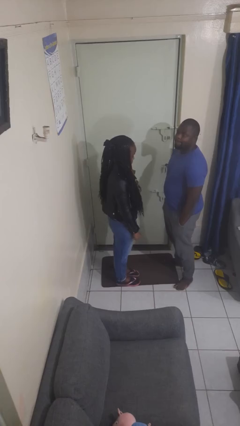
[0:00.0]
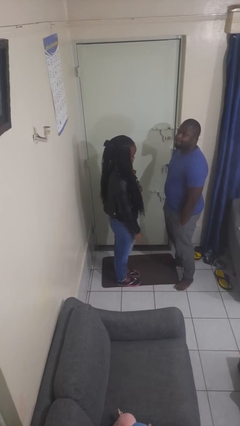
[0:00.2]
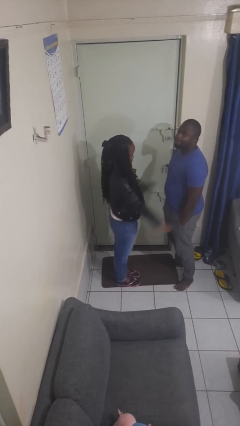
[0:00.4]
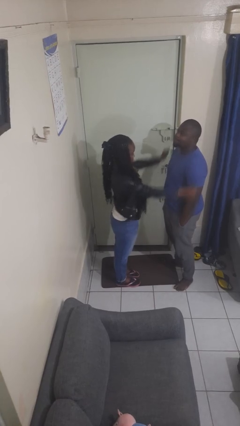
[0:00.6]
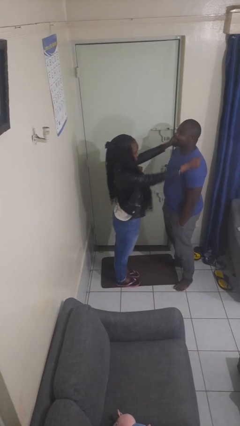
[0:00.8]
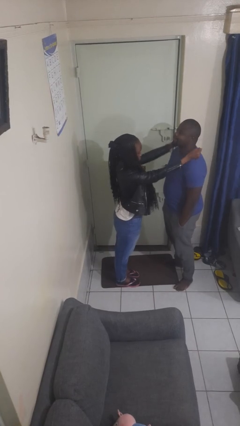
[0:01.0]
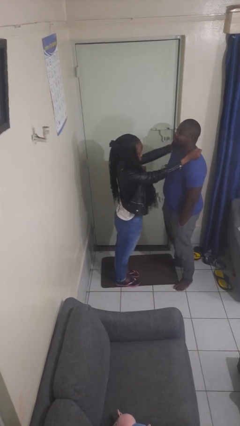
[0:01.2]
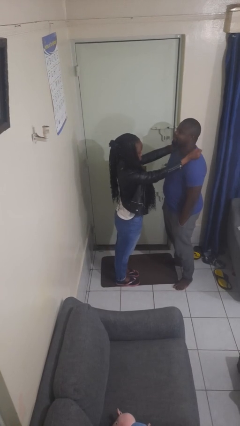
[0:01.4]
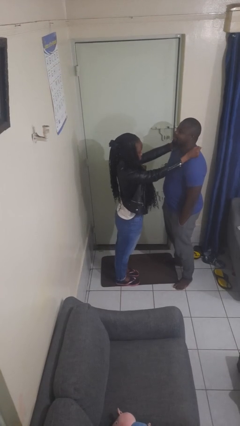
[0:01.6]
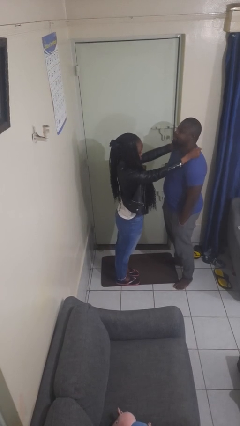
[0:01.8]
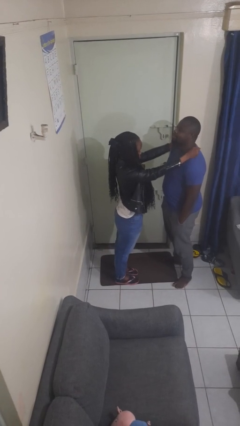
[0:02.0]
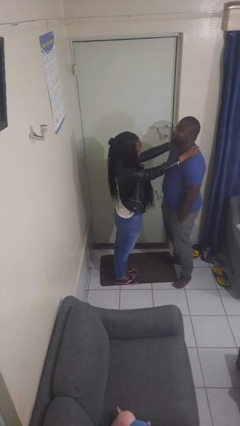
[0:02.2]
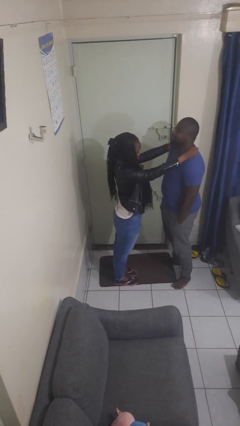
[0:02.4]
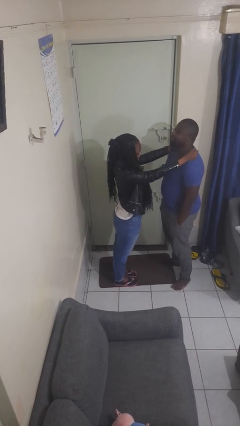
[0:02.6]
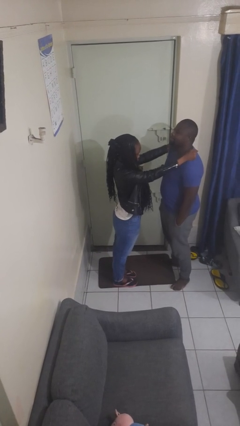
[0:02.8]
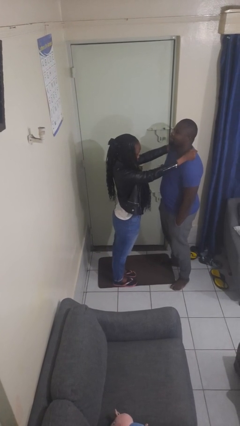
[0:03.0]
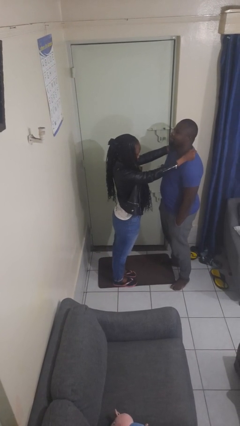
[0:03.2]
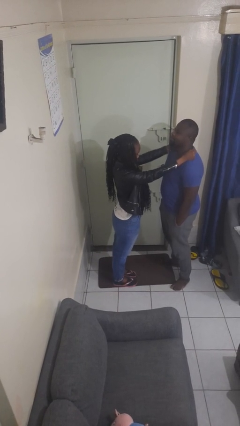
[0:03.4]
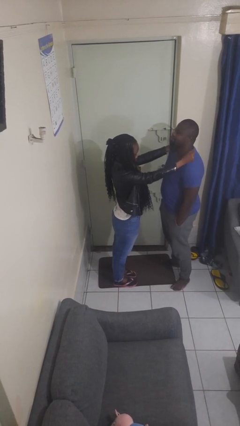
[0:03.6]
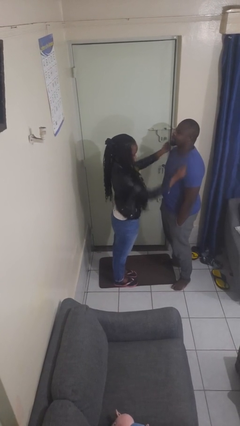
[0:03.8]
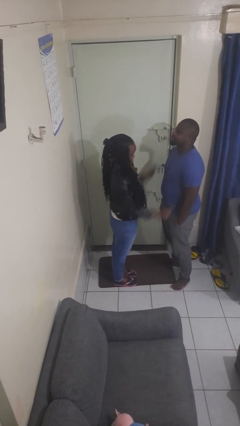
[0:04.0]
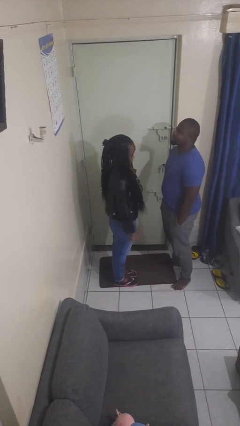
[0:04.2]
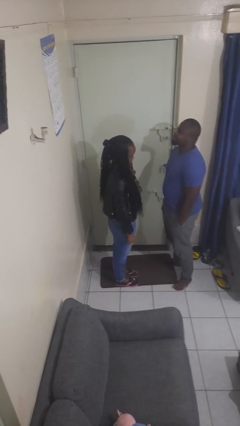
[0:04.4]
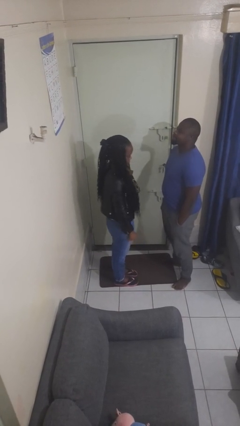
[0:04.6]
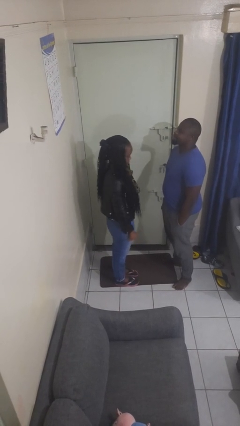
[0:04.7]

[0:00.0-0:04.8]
person pounds shoulders of person

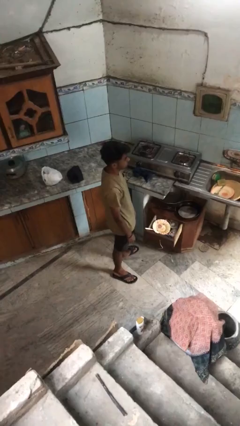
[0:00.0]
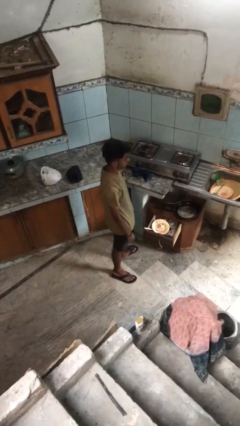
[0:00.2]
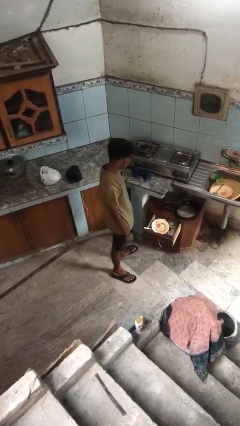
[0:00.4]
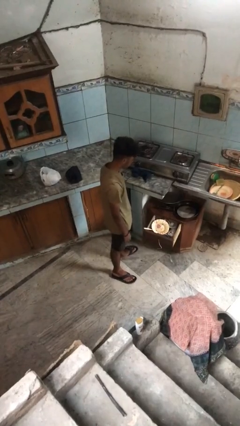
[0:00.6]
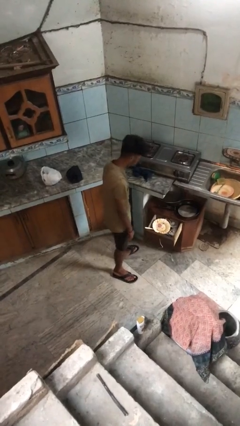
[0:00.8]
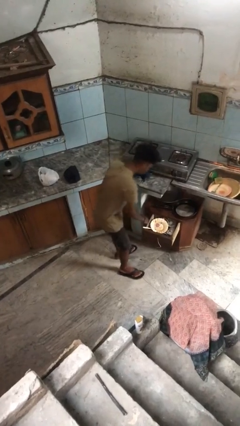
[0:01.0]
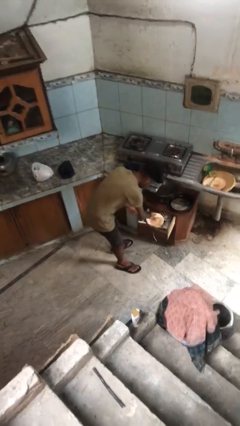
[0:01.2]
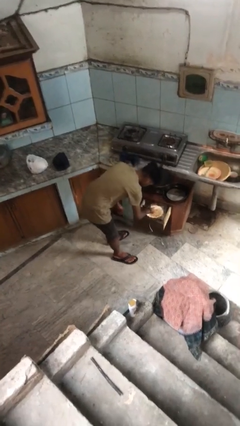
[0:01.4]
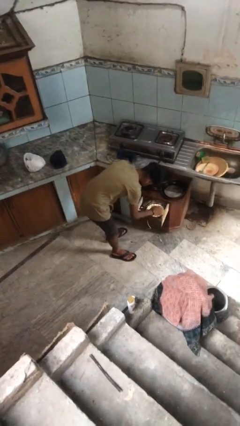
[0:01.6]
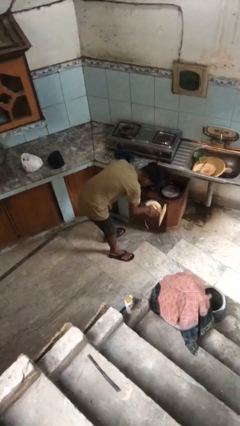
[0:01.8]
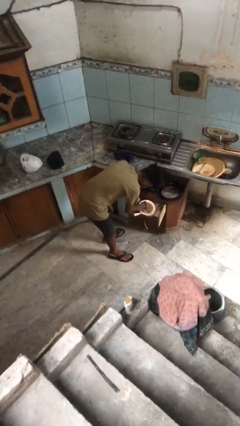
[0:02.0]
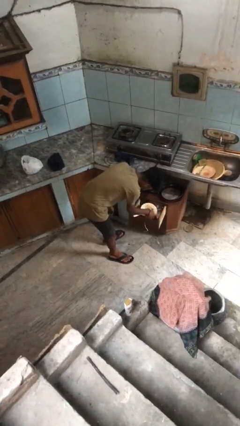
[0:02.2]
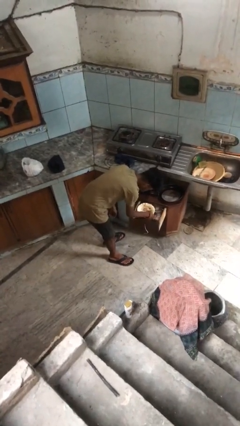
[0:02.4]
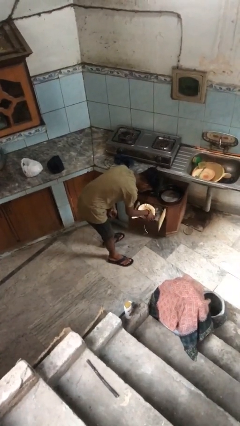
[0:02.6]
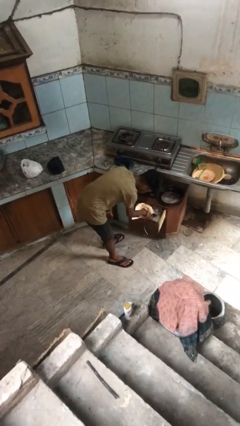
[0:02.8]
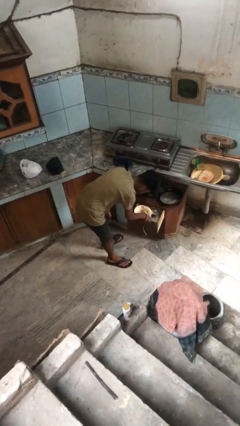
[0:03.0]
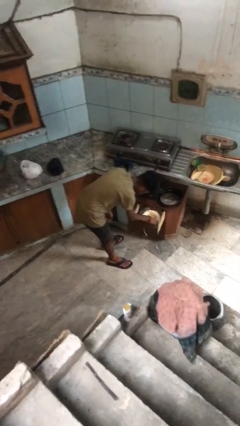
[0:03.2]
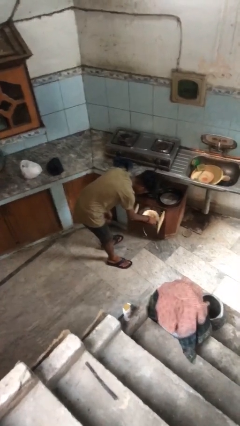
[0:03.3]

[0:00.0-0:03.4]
person searches in kitchen drawer

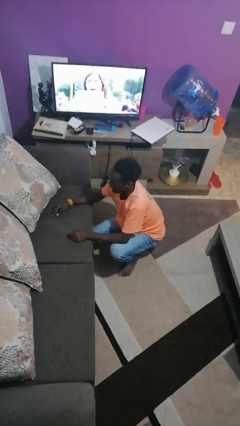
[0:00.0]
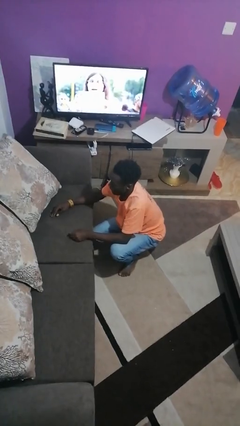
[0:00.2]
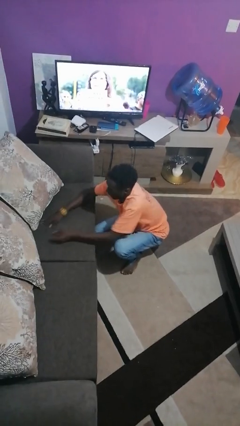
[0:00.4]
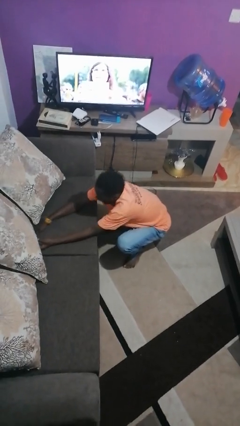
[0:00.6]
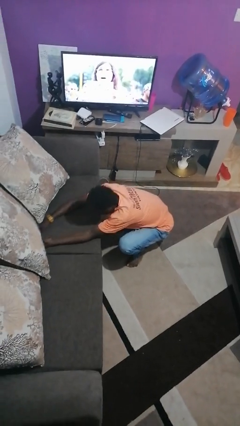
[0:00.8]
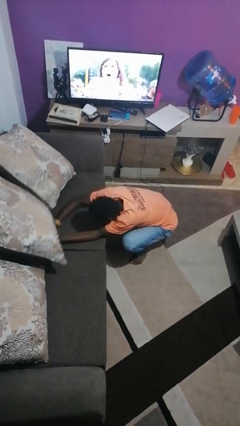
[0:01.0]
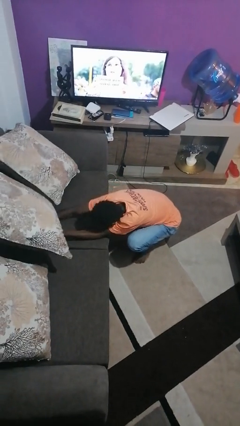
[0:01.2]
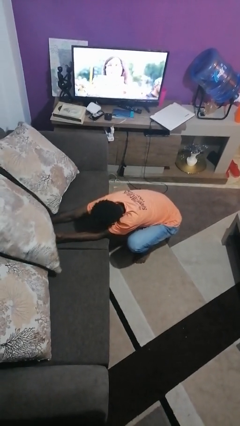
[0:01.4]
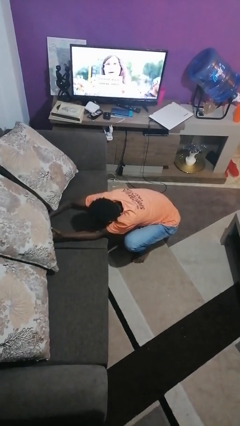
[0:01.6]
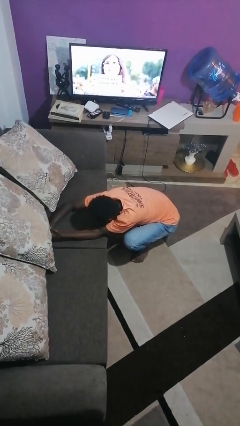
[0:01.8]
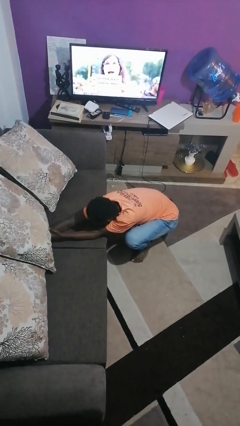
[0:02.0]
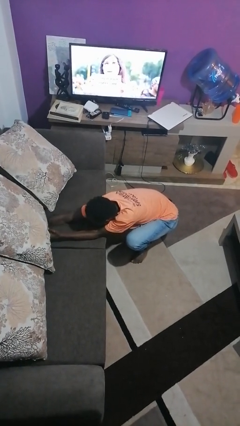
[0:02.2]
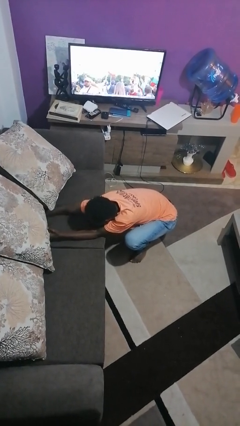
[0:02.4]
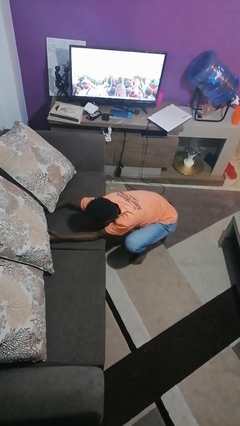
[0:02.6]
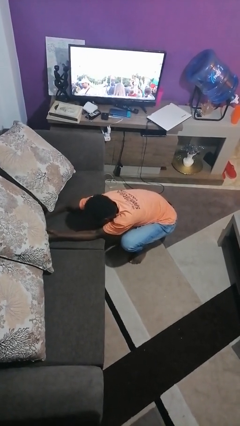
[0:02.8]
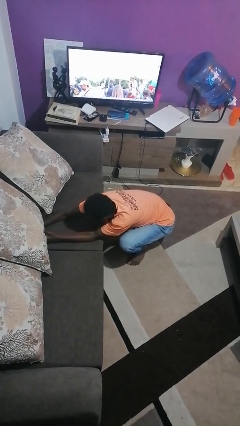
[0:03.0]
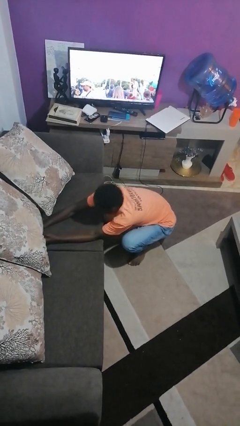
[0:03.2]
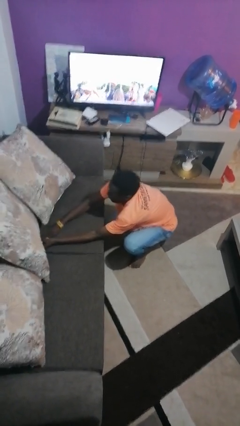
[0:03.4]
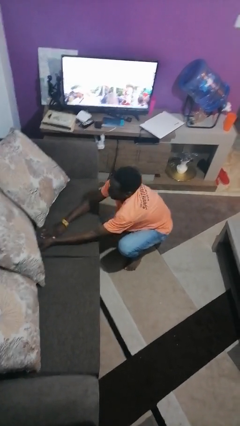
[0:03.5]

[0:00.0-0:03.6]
person searches in couch

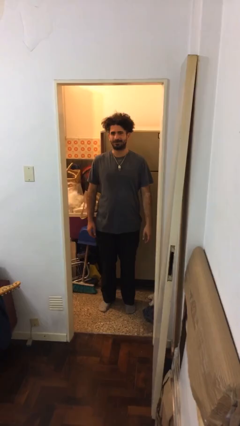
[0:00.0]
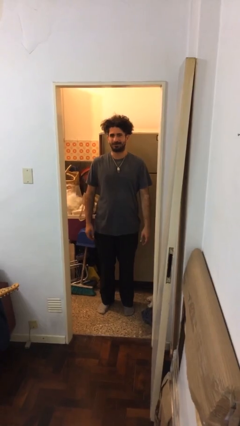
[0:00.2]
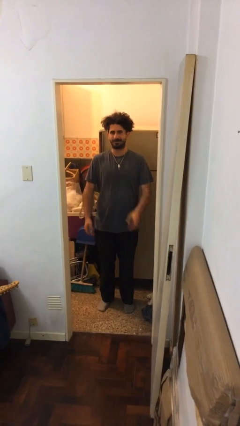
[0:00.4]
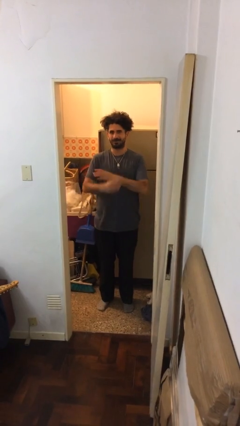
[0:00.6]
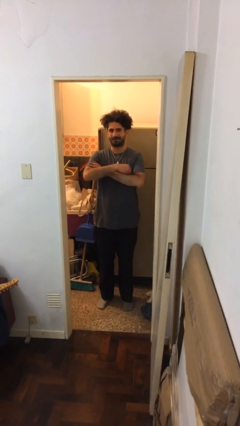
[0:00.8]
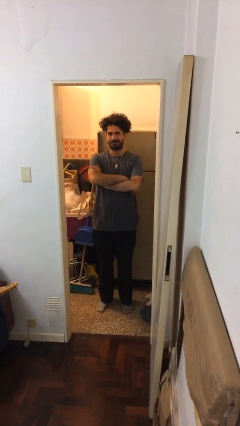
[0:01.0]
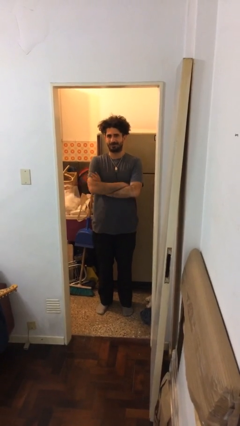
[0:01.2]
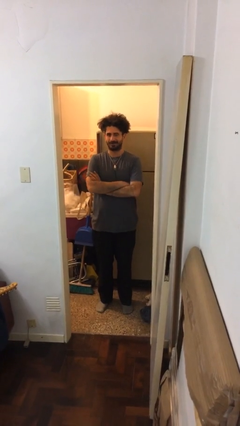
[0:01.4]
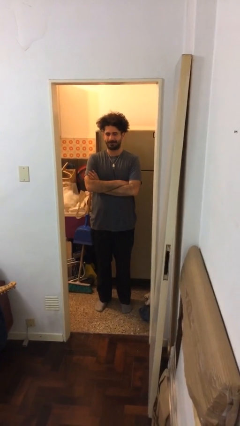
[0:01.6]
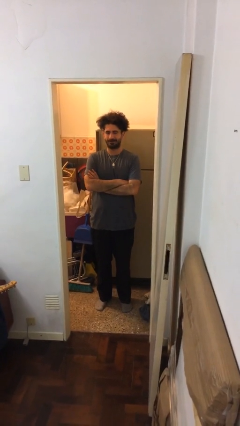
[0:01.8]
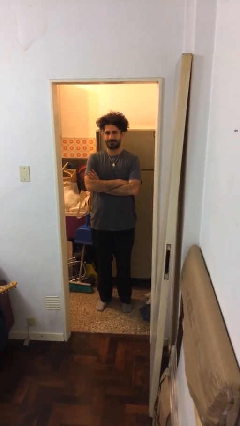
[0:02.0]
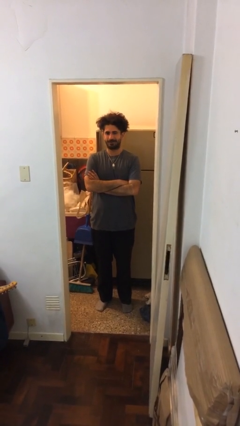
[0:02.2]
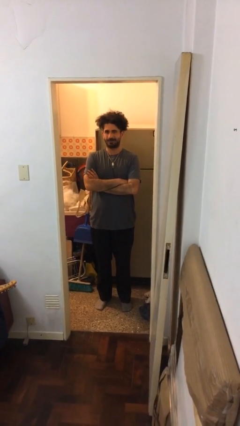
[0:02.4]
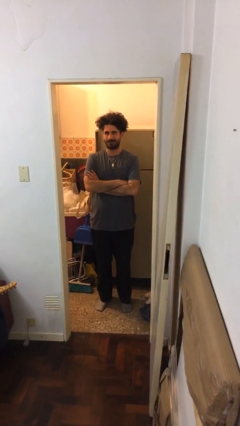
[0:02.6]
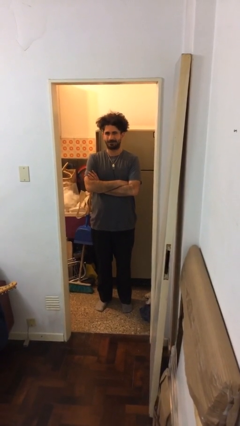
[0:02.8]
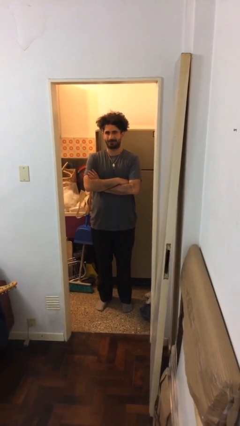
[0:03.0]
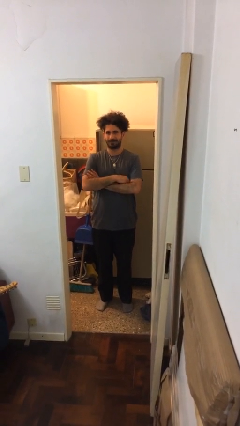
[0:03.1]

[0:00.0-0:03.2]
person crosses arms

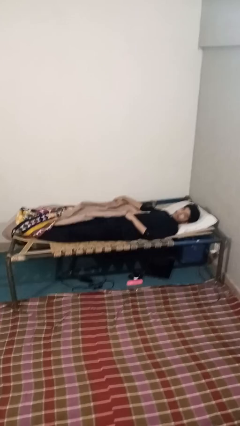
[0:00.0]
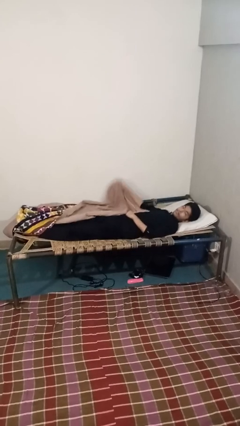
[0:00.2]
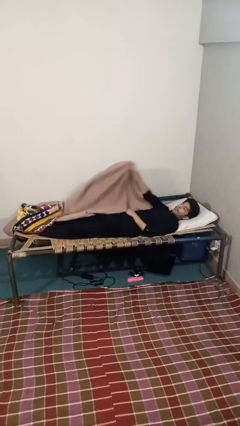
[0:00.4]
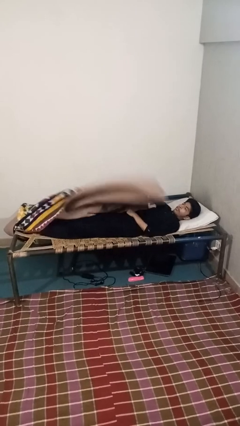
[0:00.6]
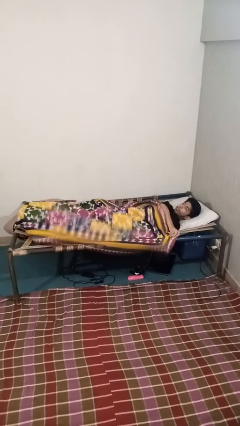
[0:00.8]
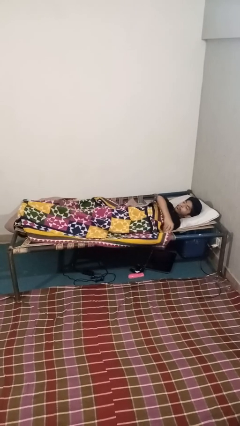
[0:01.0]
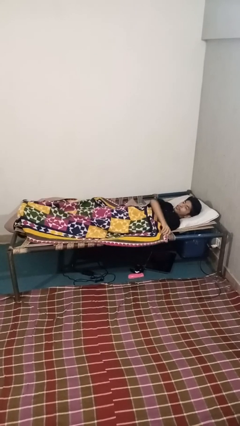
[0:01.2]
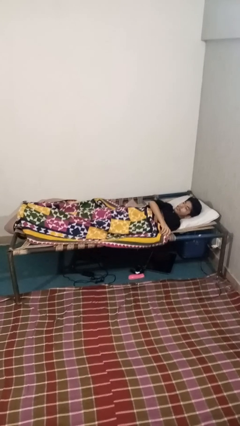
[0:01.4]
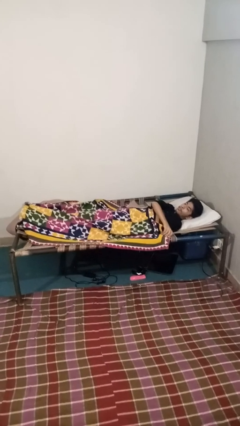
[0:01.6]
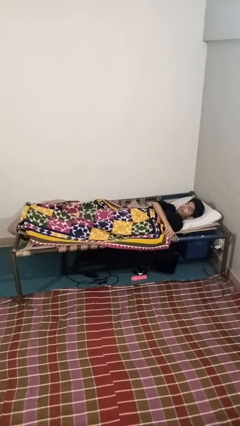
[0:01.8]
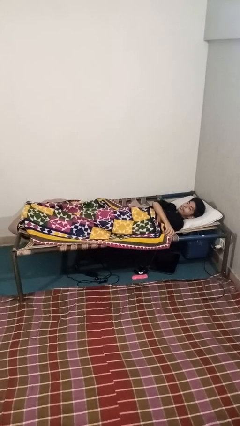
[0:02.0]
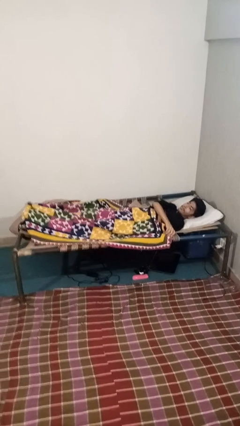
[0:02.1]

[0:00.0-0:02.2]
person covers with bedsheets

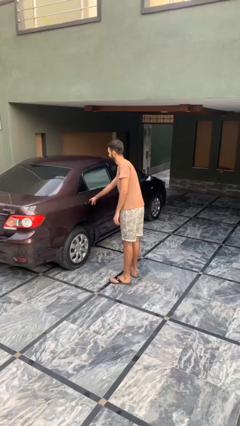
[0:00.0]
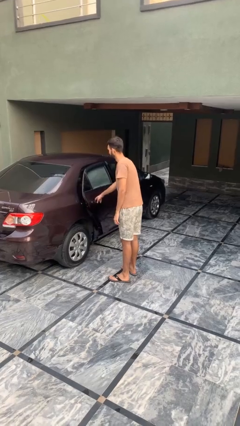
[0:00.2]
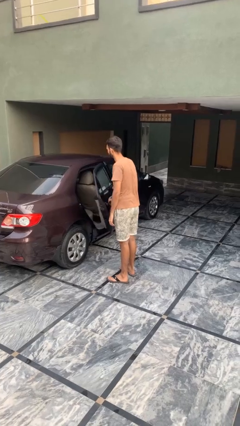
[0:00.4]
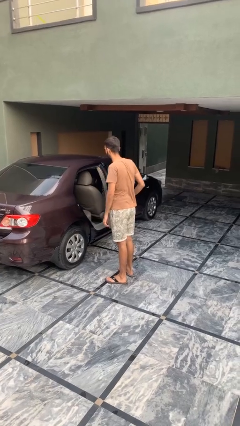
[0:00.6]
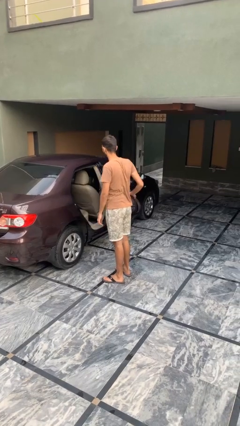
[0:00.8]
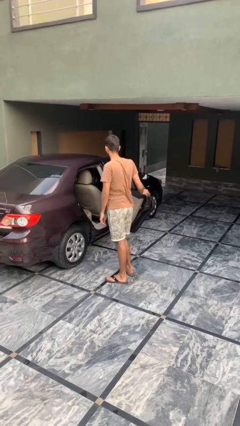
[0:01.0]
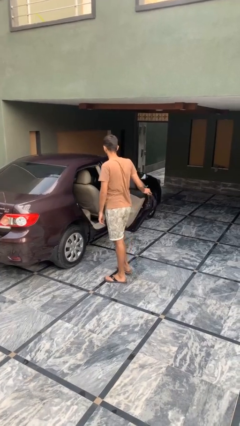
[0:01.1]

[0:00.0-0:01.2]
person opens car door
